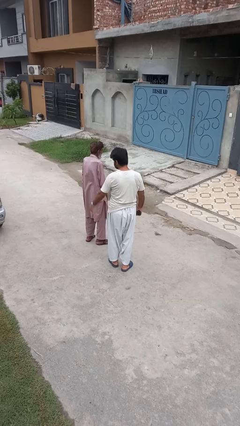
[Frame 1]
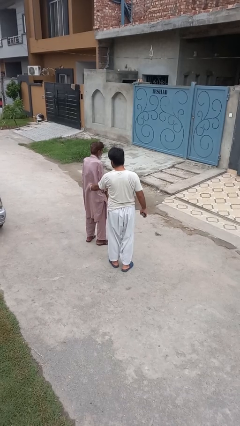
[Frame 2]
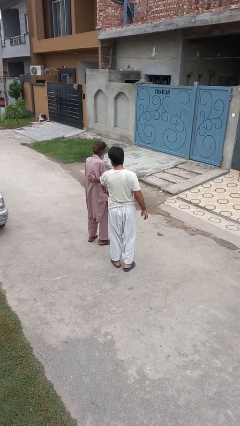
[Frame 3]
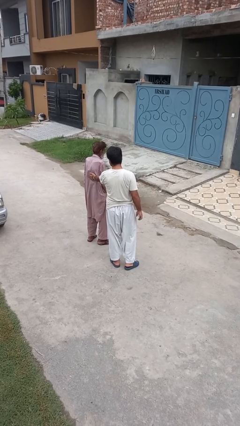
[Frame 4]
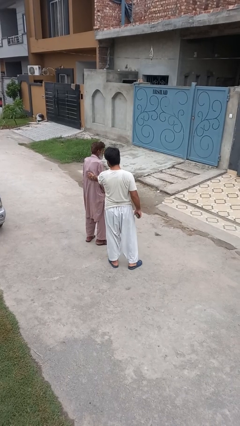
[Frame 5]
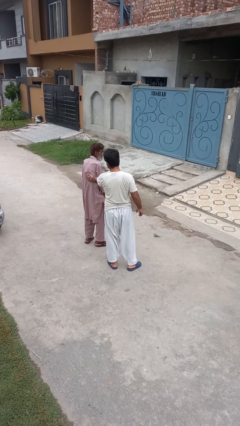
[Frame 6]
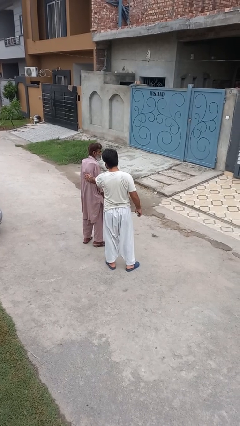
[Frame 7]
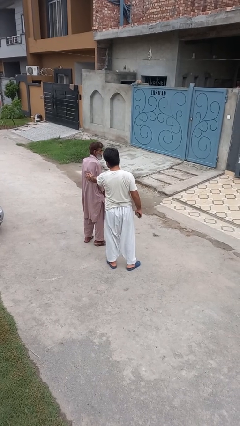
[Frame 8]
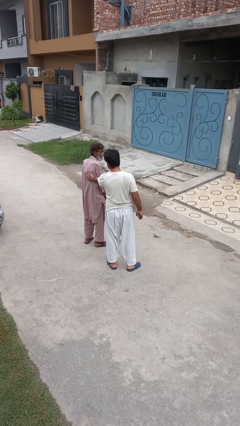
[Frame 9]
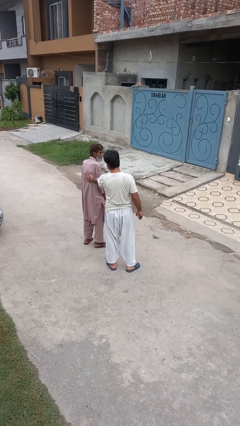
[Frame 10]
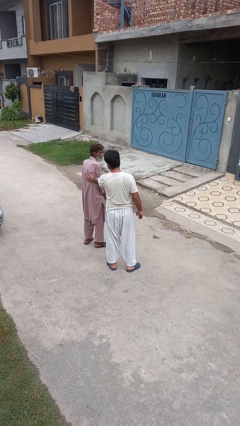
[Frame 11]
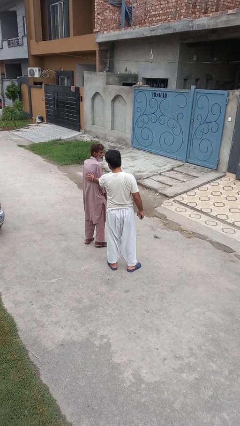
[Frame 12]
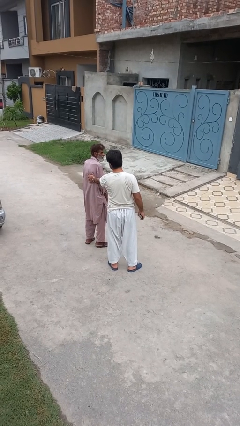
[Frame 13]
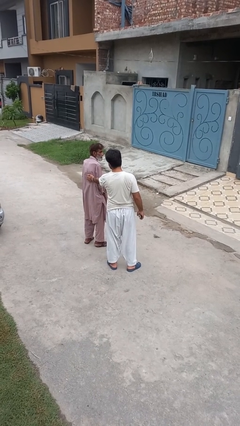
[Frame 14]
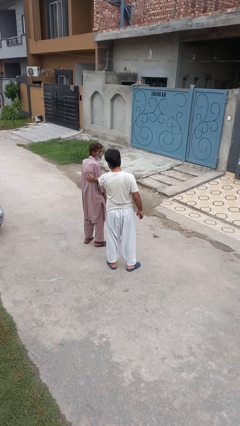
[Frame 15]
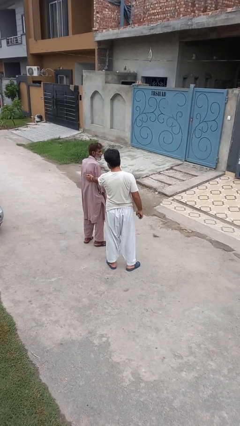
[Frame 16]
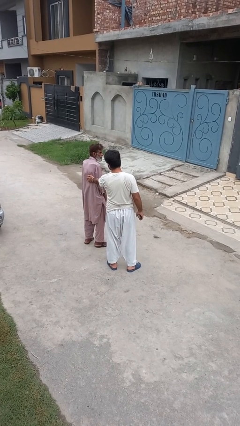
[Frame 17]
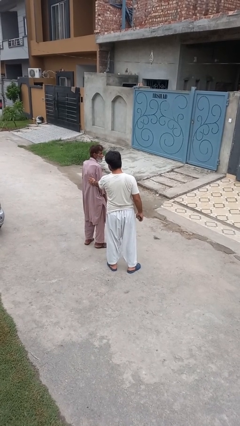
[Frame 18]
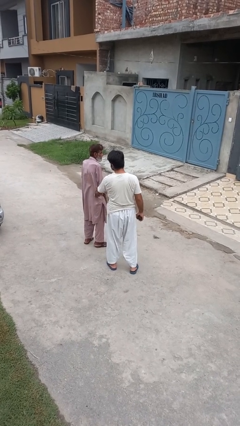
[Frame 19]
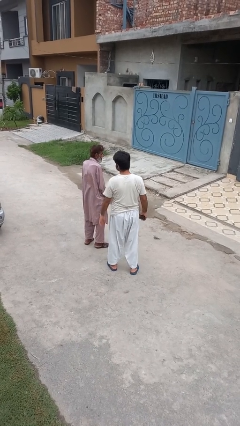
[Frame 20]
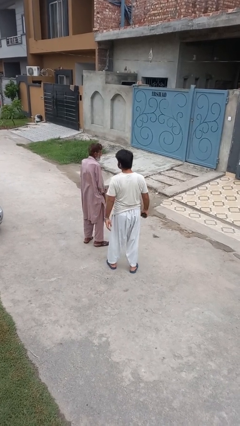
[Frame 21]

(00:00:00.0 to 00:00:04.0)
person touches back of person

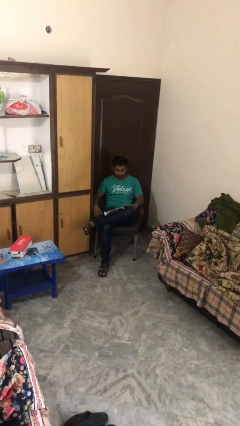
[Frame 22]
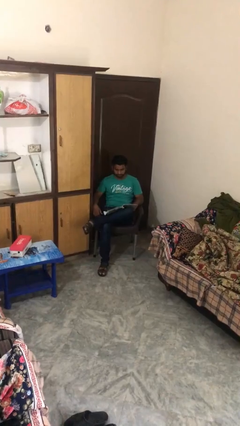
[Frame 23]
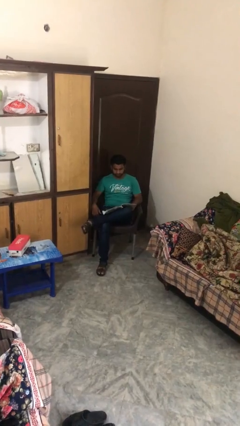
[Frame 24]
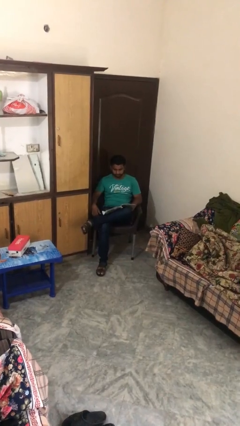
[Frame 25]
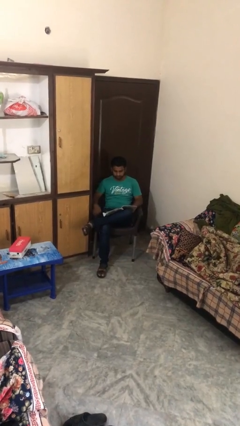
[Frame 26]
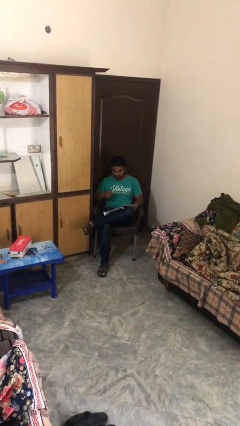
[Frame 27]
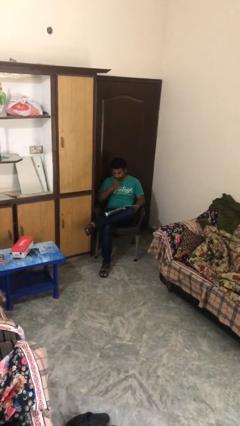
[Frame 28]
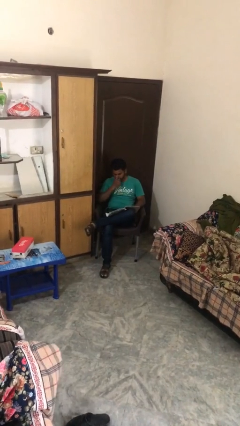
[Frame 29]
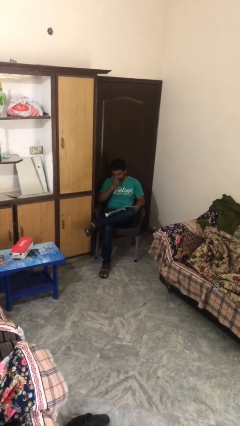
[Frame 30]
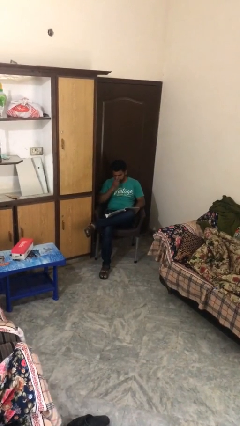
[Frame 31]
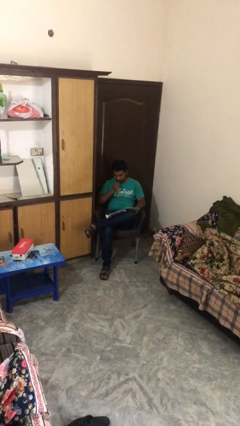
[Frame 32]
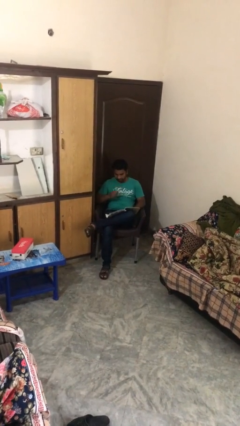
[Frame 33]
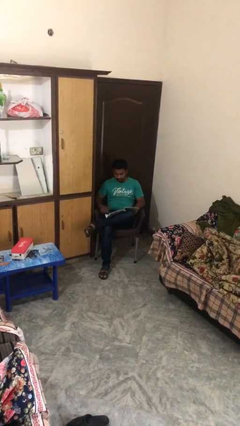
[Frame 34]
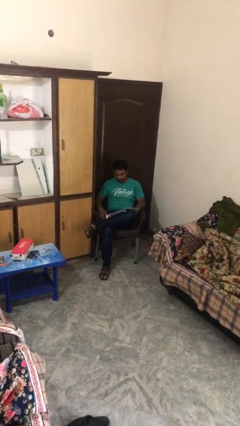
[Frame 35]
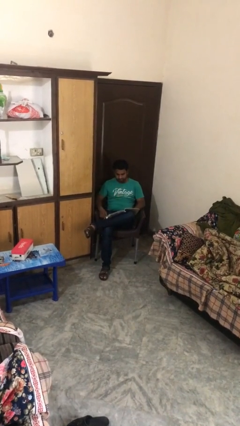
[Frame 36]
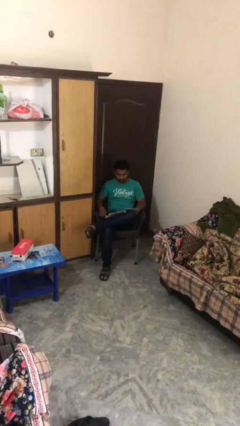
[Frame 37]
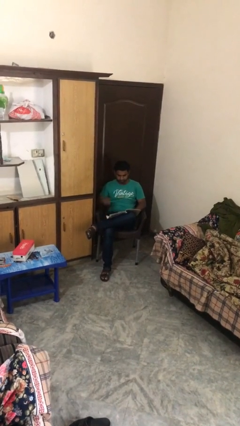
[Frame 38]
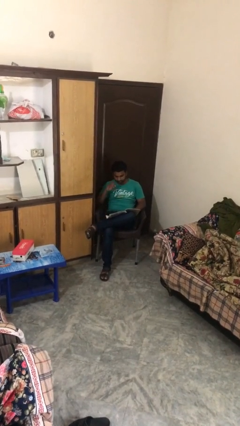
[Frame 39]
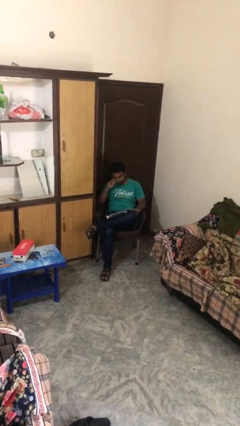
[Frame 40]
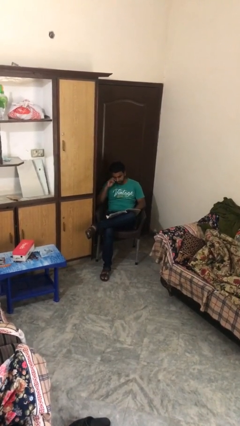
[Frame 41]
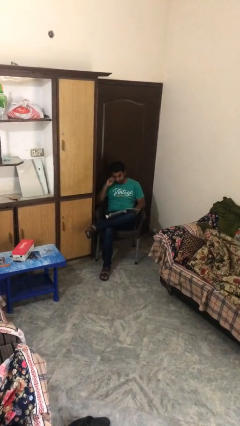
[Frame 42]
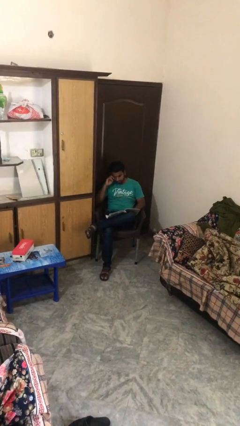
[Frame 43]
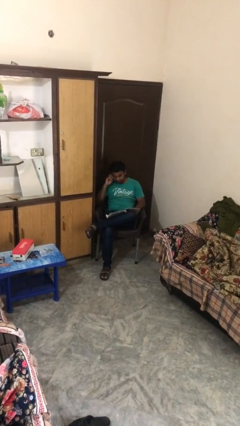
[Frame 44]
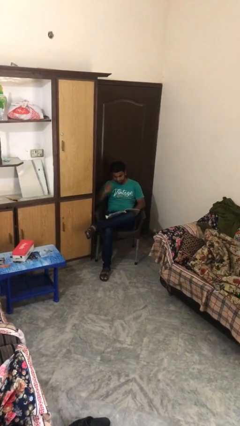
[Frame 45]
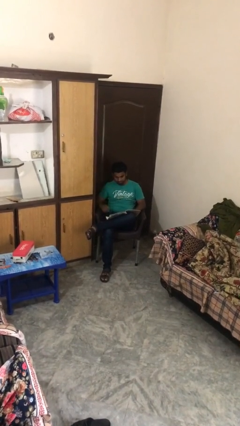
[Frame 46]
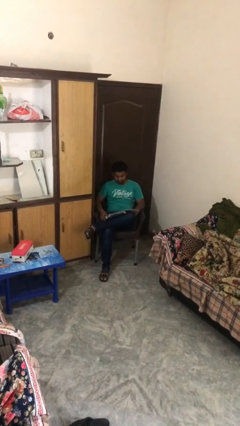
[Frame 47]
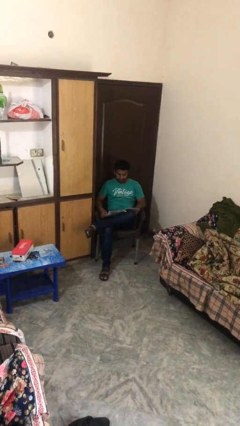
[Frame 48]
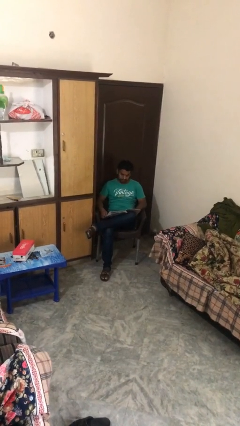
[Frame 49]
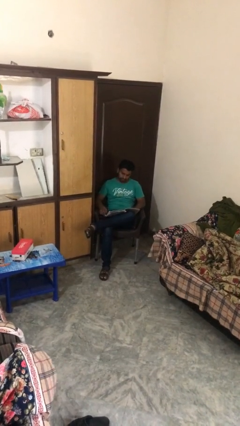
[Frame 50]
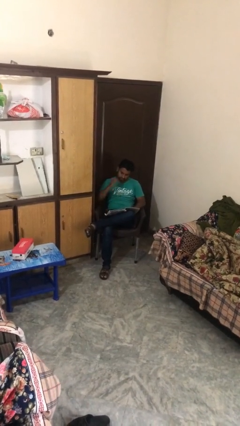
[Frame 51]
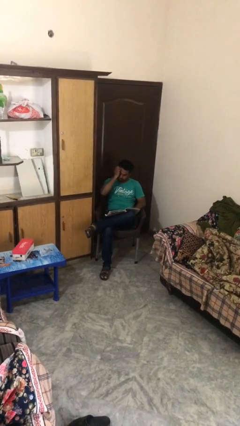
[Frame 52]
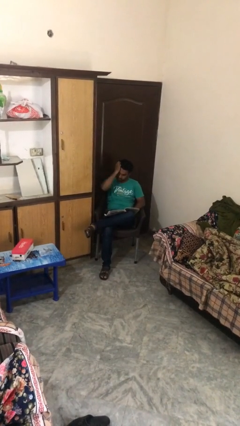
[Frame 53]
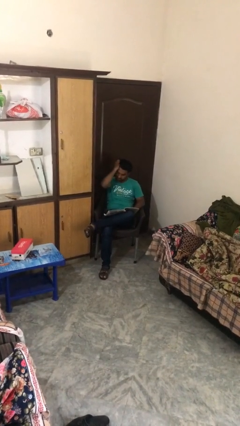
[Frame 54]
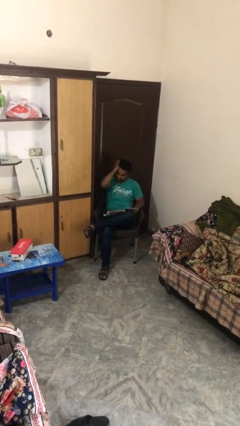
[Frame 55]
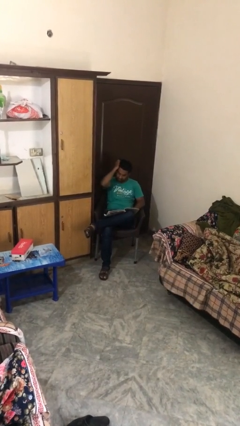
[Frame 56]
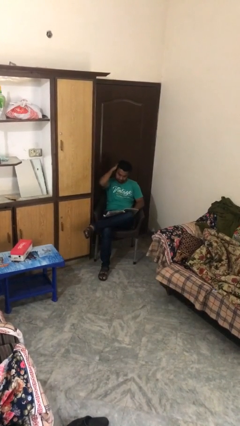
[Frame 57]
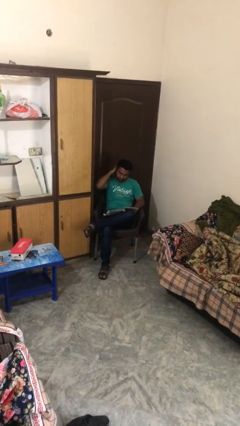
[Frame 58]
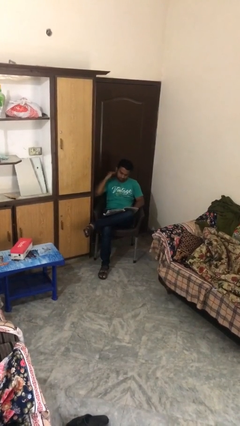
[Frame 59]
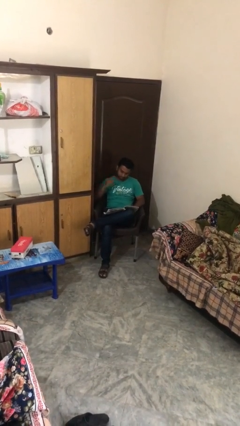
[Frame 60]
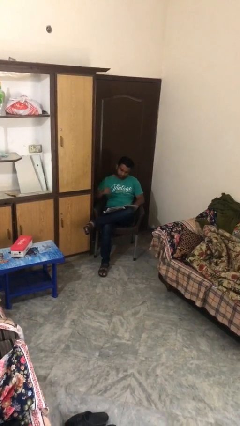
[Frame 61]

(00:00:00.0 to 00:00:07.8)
person reads document

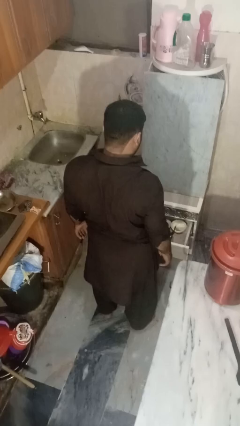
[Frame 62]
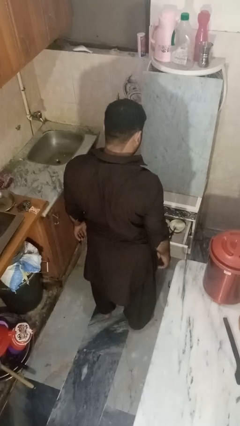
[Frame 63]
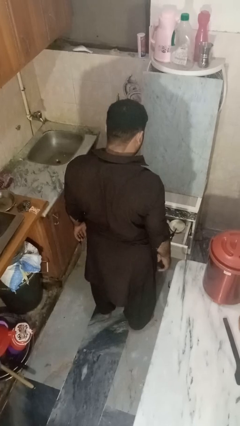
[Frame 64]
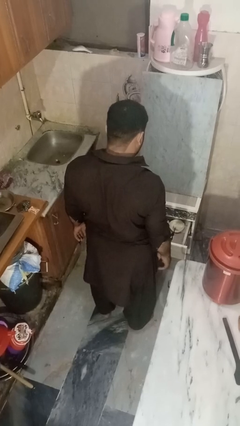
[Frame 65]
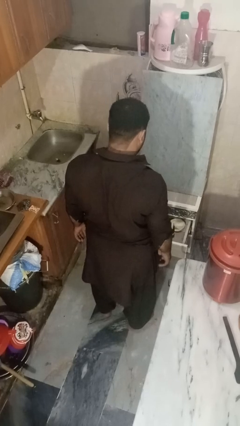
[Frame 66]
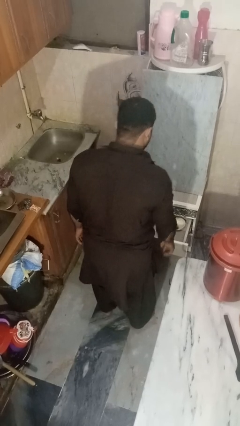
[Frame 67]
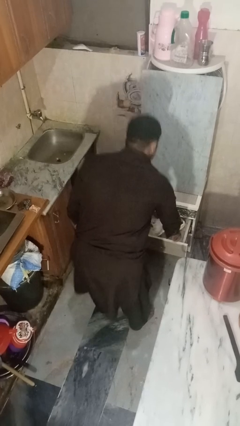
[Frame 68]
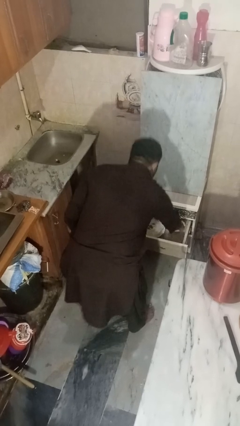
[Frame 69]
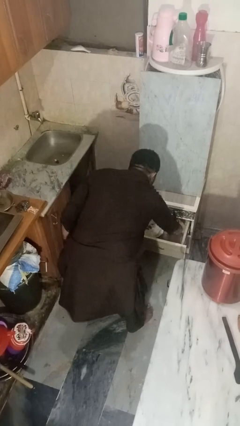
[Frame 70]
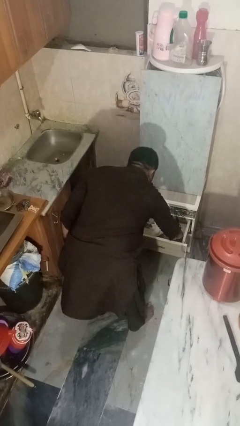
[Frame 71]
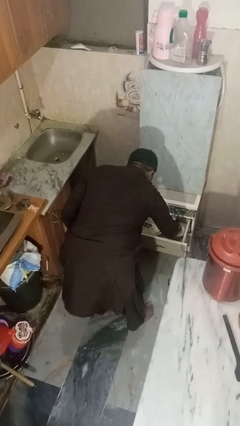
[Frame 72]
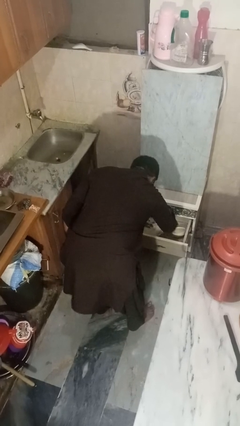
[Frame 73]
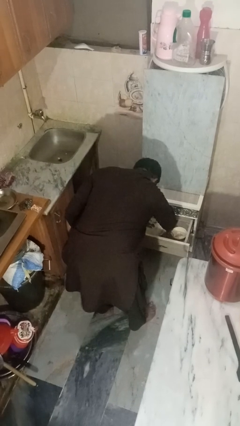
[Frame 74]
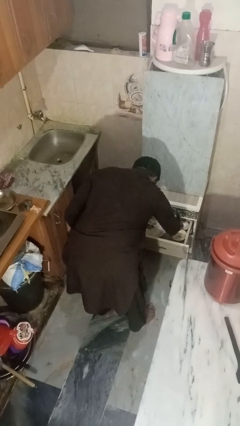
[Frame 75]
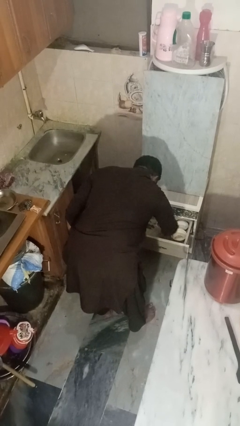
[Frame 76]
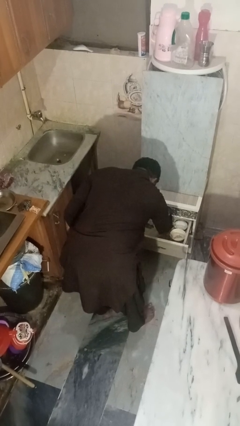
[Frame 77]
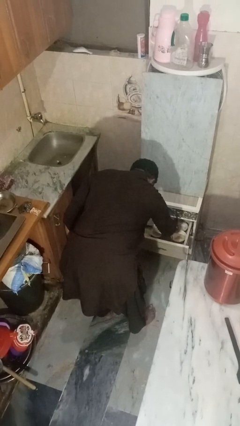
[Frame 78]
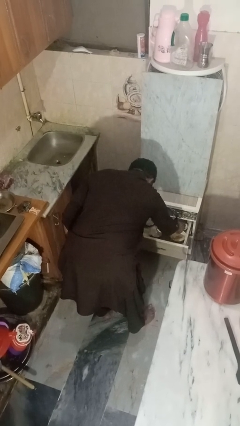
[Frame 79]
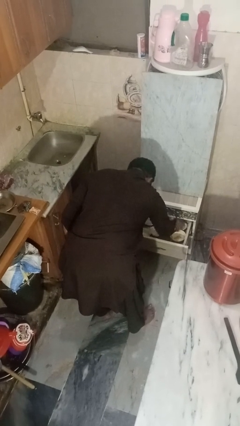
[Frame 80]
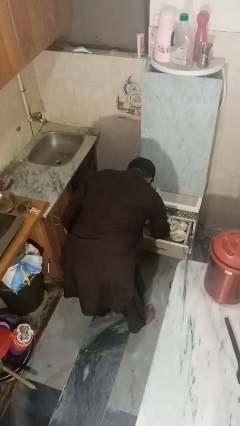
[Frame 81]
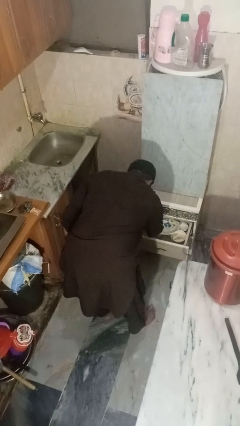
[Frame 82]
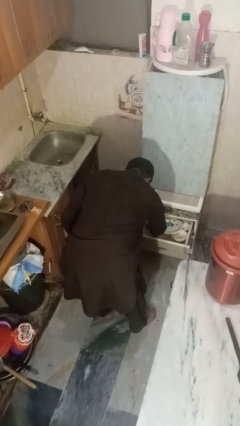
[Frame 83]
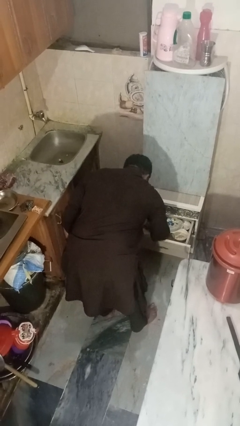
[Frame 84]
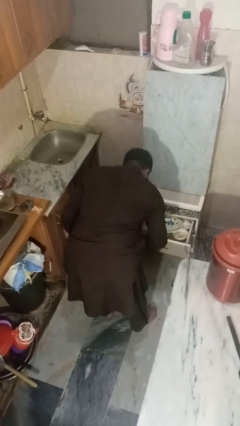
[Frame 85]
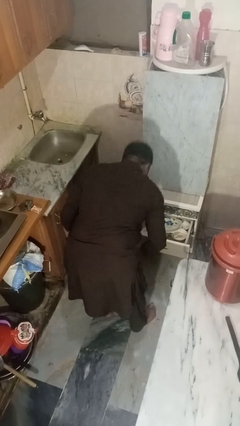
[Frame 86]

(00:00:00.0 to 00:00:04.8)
person searches in kitchen drawer

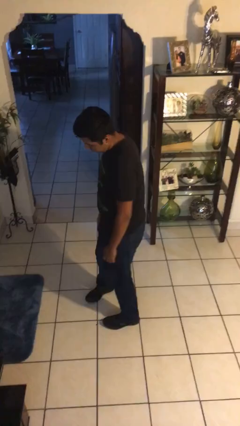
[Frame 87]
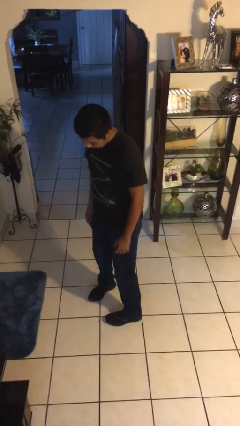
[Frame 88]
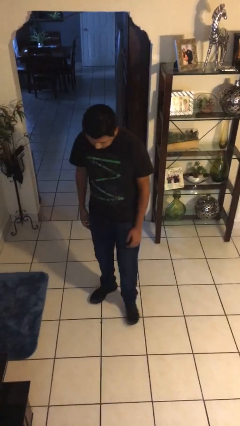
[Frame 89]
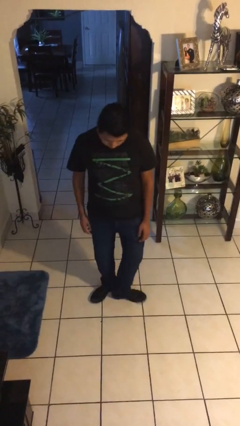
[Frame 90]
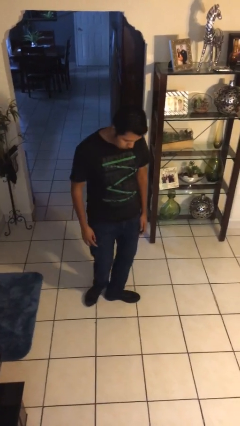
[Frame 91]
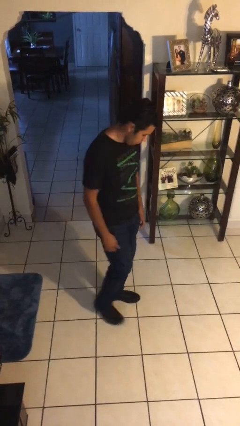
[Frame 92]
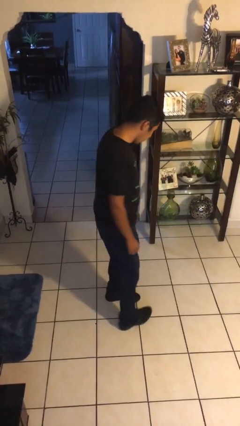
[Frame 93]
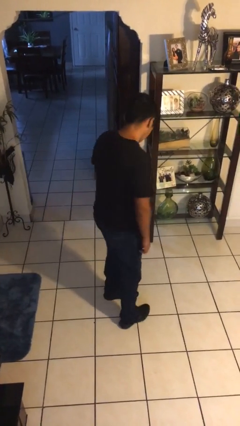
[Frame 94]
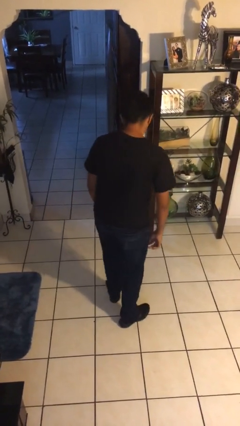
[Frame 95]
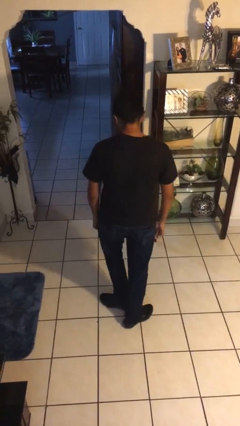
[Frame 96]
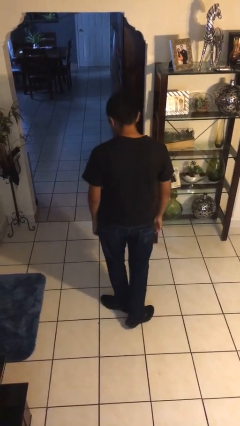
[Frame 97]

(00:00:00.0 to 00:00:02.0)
person twirls
